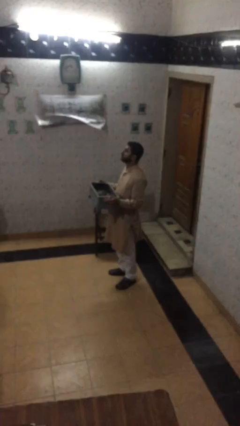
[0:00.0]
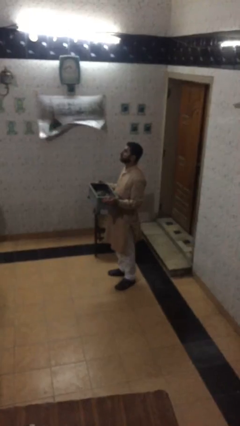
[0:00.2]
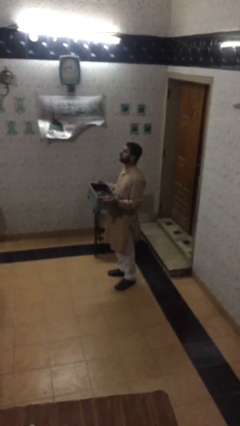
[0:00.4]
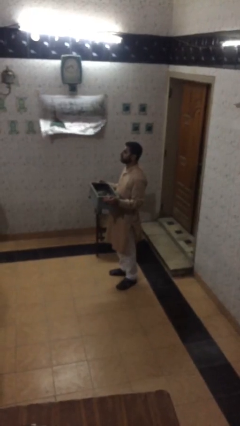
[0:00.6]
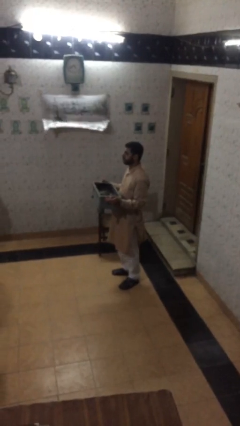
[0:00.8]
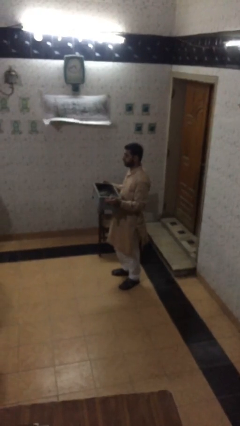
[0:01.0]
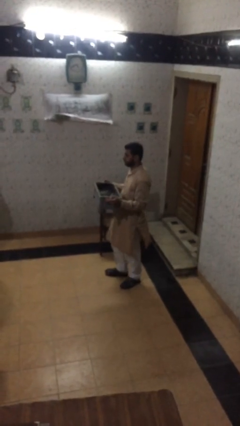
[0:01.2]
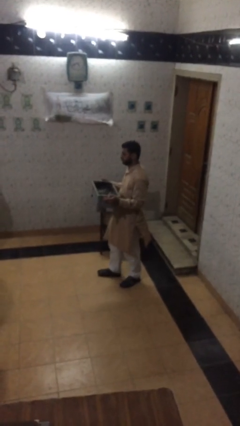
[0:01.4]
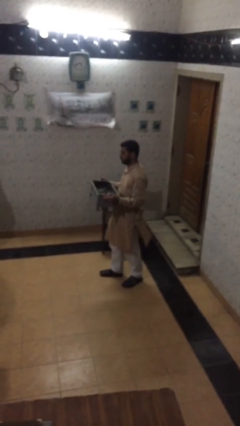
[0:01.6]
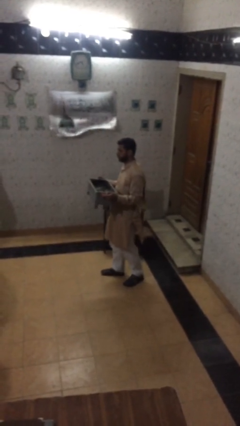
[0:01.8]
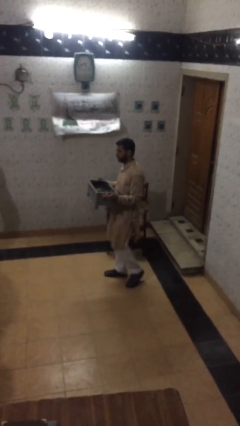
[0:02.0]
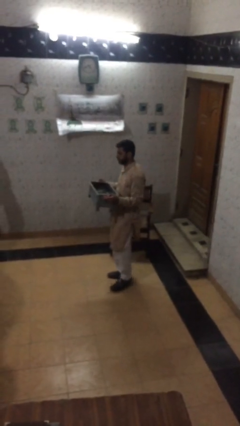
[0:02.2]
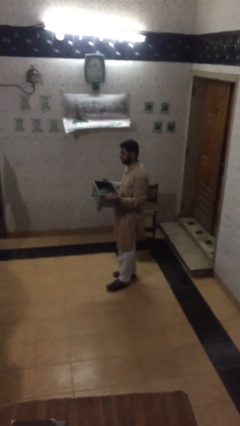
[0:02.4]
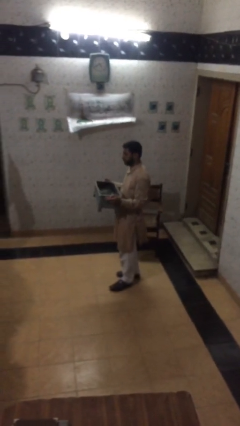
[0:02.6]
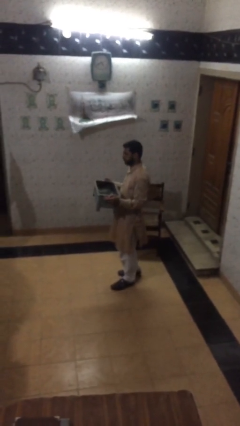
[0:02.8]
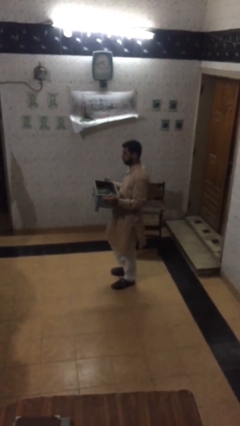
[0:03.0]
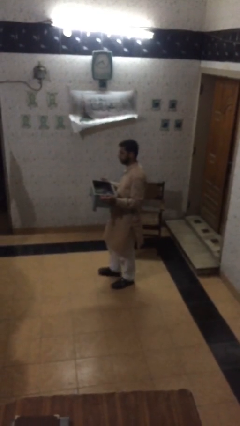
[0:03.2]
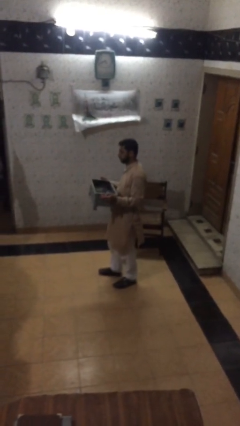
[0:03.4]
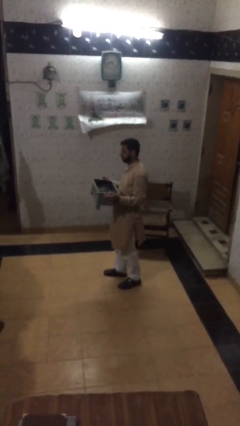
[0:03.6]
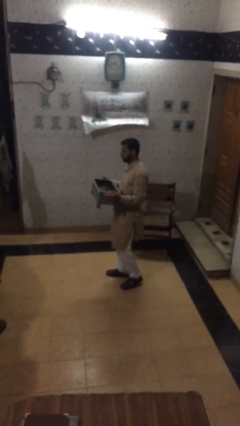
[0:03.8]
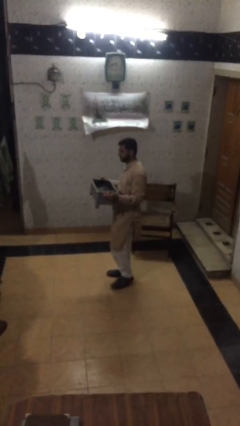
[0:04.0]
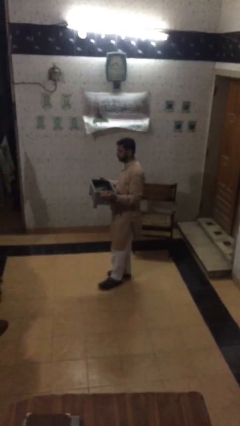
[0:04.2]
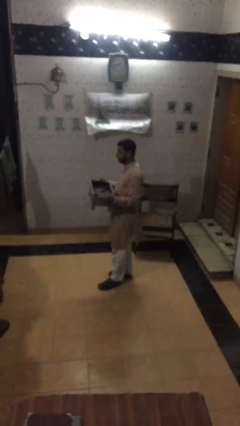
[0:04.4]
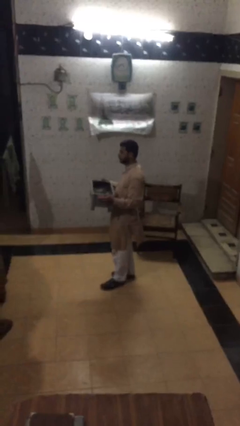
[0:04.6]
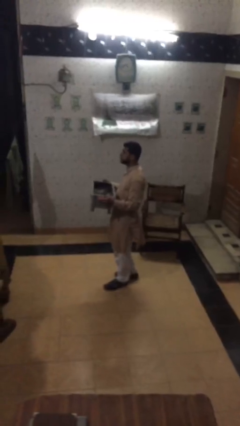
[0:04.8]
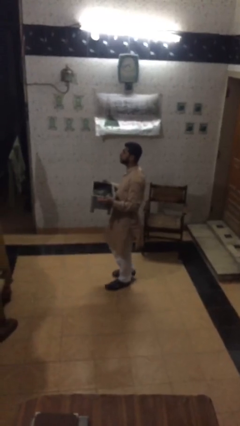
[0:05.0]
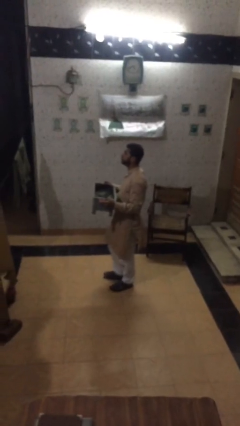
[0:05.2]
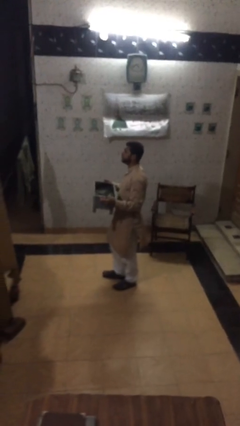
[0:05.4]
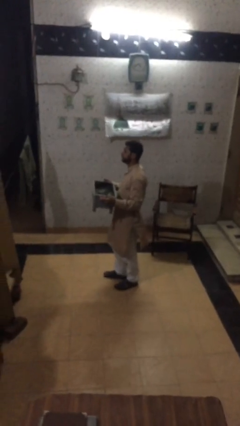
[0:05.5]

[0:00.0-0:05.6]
person carries heavy object

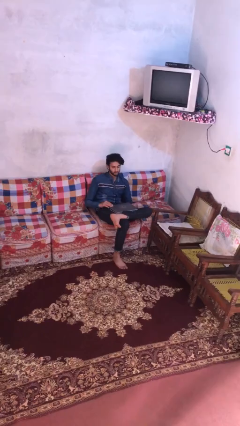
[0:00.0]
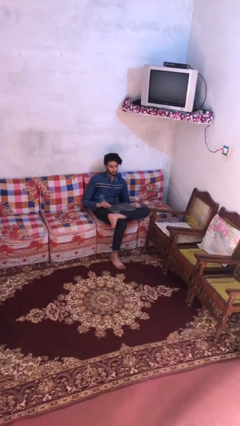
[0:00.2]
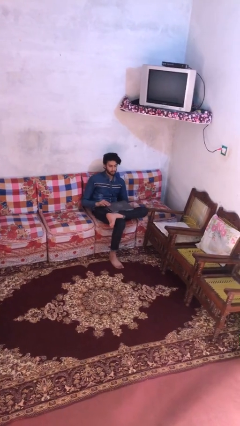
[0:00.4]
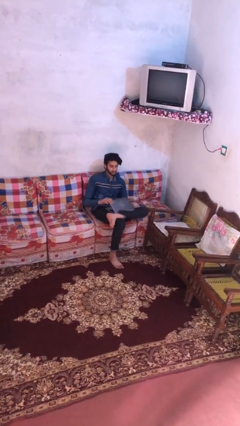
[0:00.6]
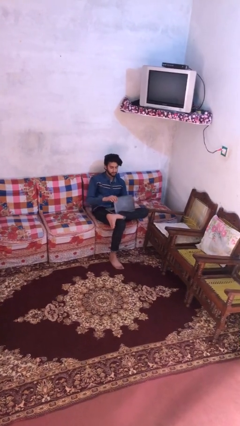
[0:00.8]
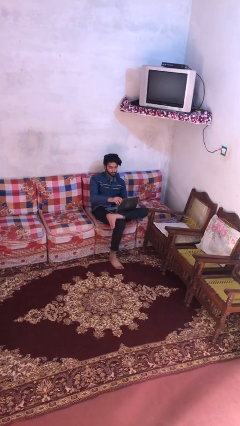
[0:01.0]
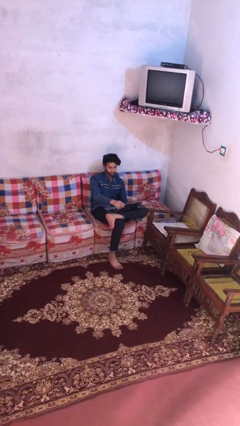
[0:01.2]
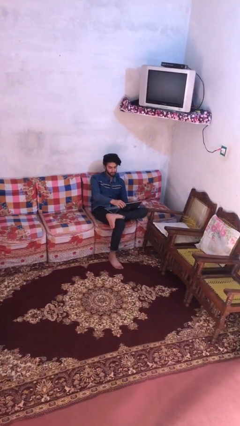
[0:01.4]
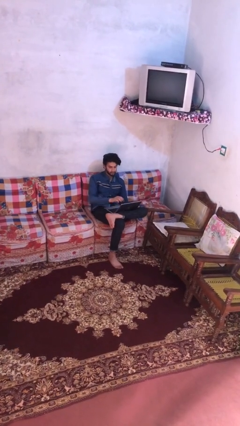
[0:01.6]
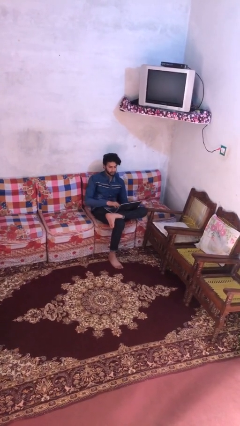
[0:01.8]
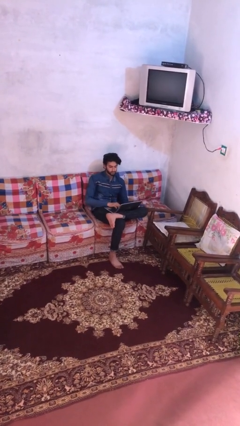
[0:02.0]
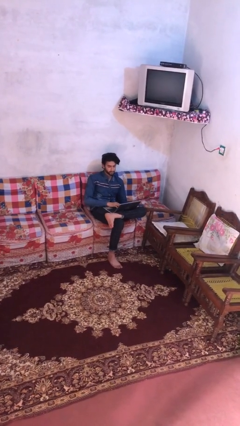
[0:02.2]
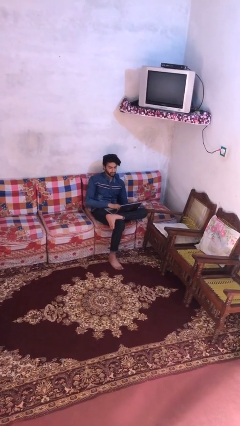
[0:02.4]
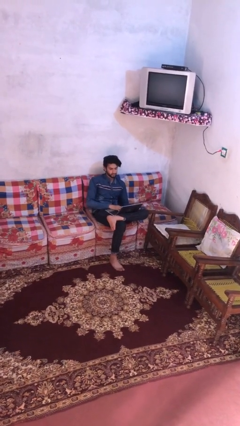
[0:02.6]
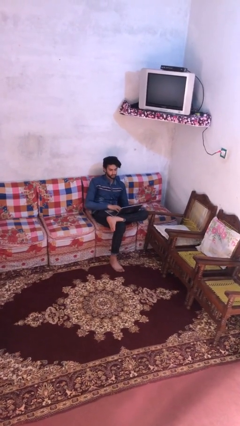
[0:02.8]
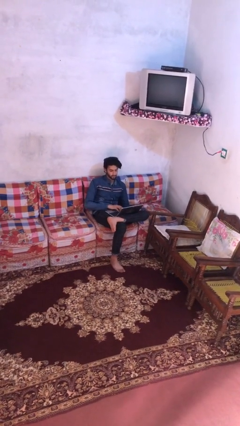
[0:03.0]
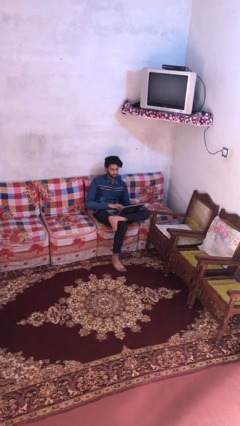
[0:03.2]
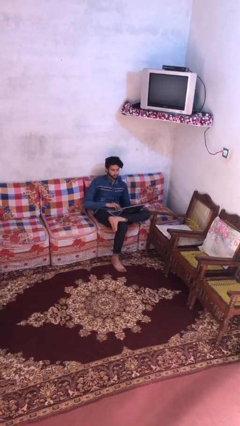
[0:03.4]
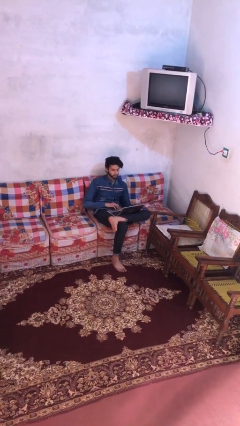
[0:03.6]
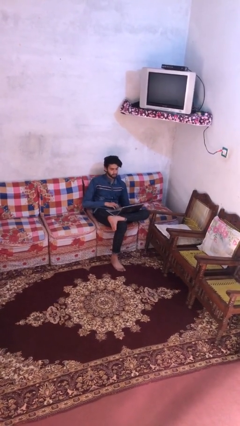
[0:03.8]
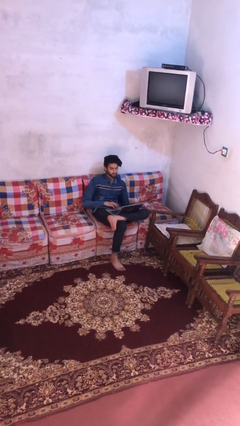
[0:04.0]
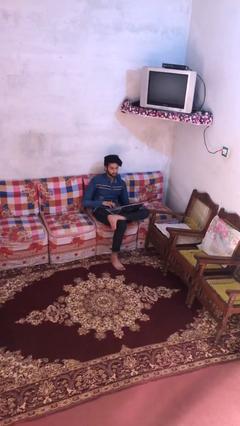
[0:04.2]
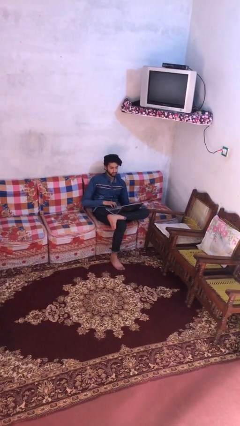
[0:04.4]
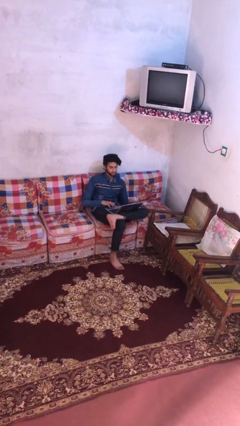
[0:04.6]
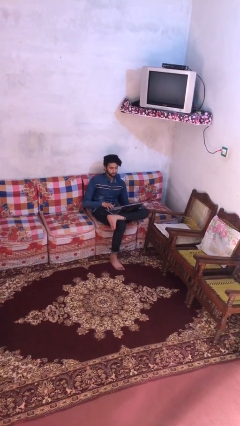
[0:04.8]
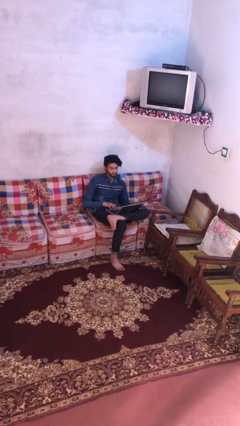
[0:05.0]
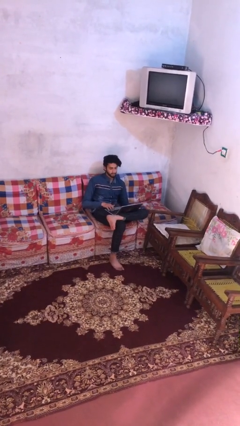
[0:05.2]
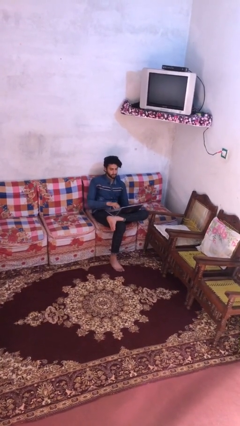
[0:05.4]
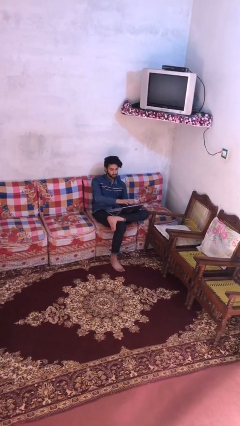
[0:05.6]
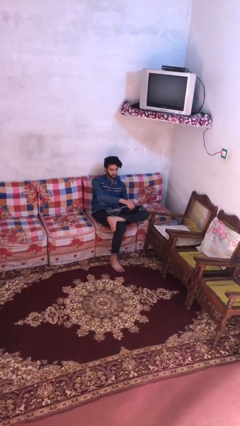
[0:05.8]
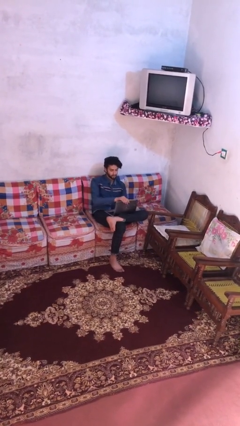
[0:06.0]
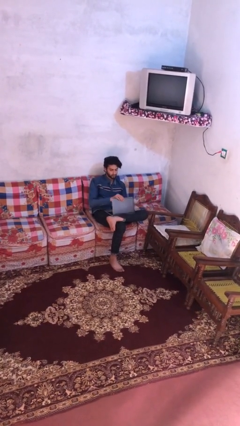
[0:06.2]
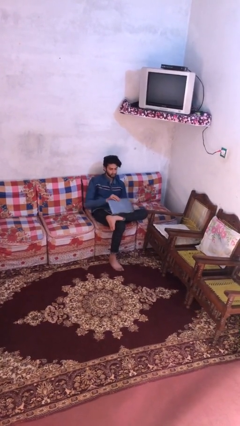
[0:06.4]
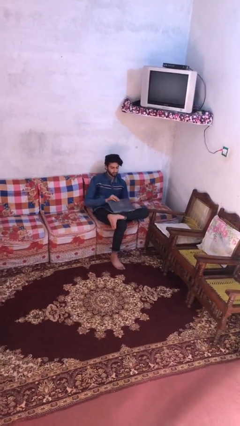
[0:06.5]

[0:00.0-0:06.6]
person interacts with laptop

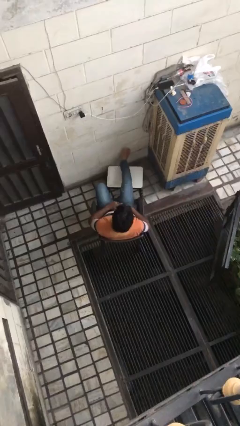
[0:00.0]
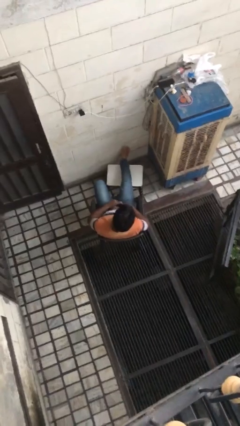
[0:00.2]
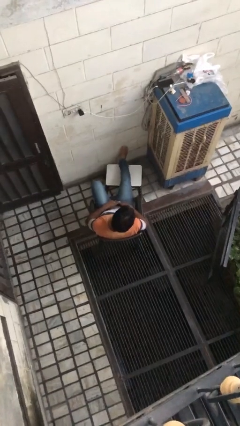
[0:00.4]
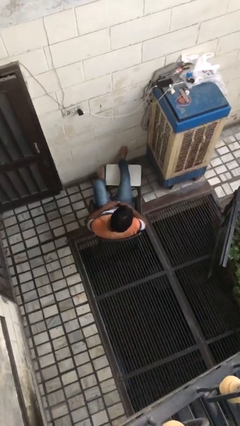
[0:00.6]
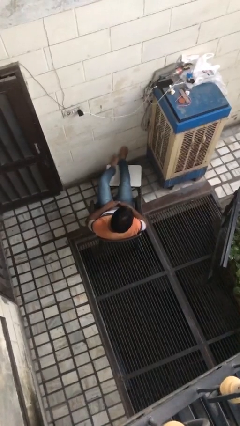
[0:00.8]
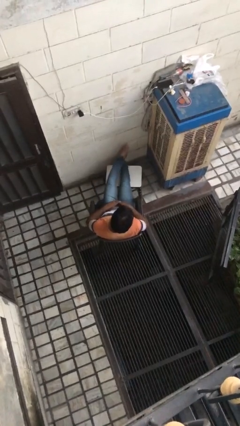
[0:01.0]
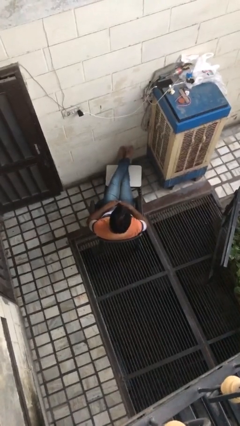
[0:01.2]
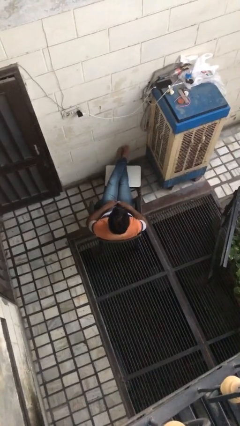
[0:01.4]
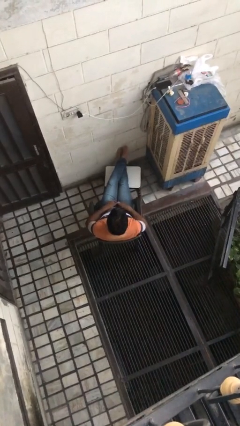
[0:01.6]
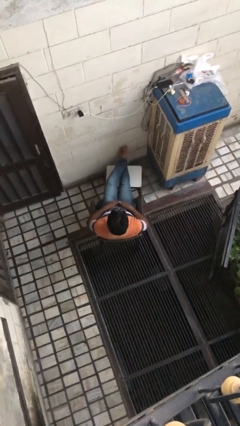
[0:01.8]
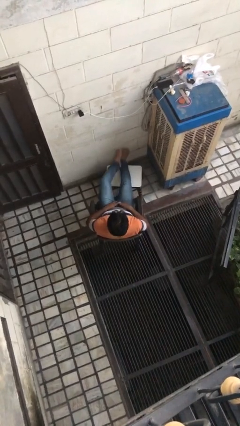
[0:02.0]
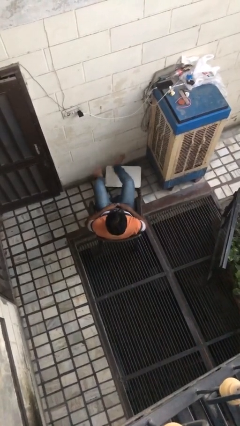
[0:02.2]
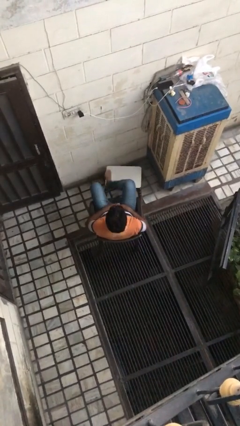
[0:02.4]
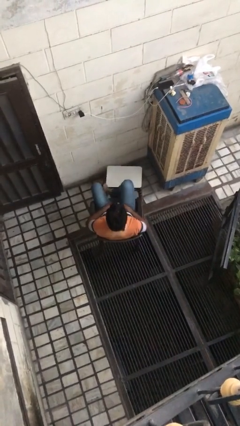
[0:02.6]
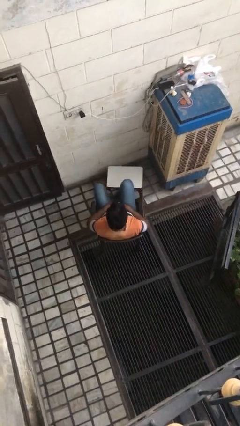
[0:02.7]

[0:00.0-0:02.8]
person puts feet up
